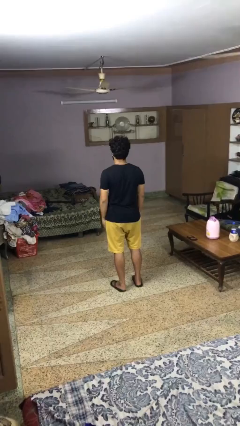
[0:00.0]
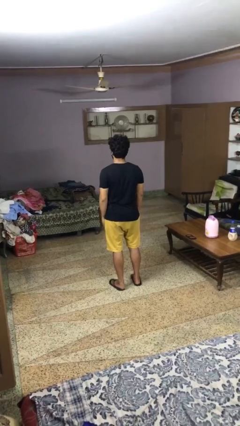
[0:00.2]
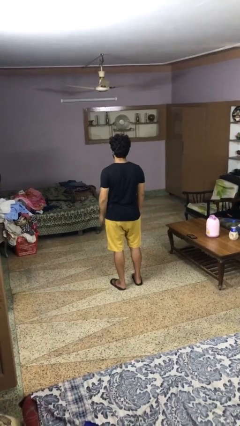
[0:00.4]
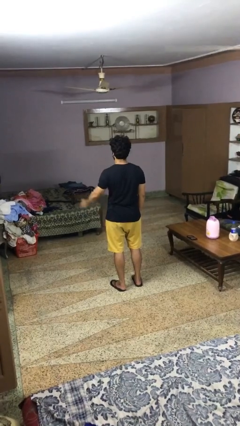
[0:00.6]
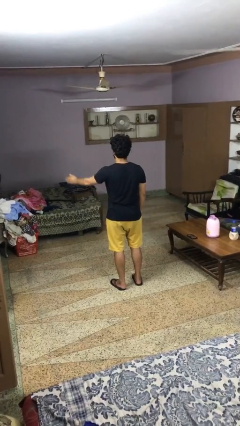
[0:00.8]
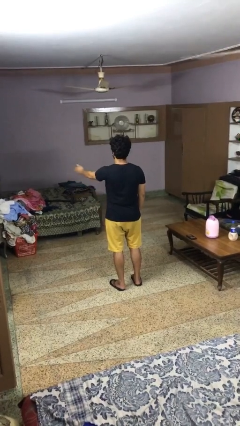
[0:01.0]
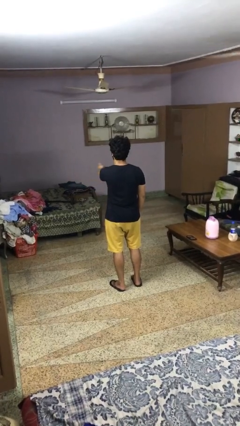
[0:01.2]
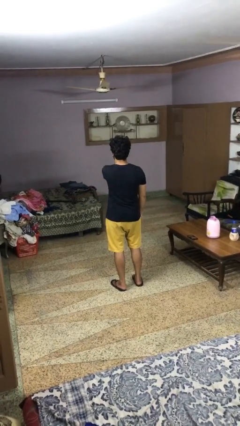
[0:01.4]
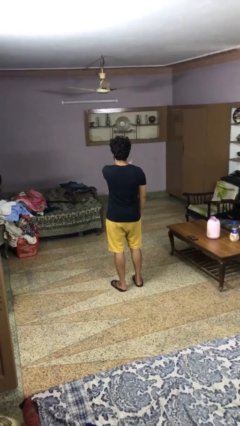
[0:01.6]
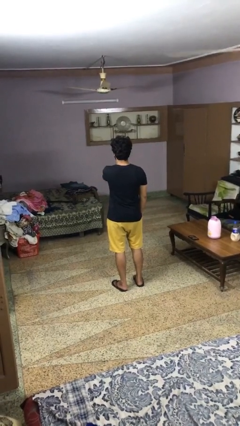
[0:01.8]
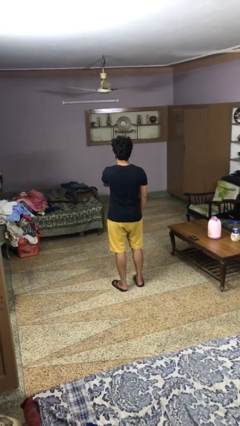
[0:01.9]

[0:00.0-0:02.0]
person gestures swipe right

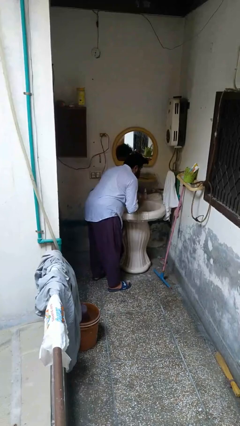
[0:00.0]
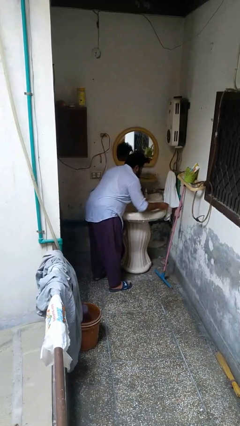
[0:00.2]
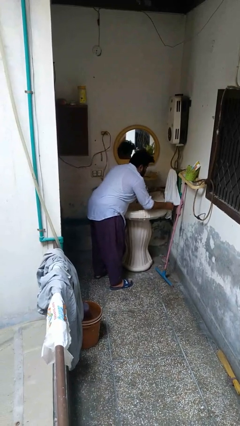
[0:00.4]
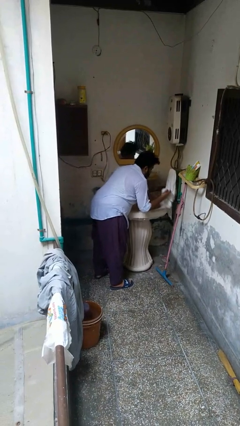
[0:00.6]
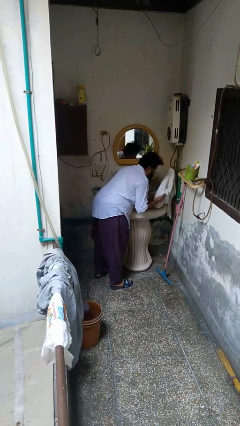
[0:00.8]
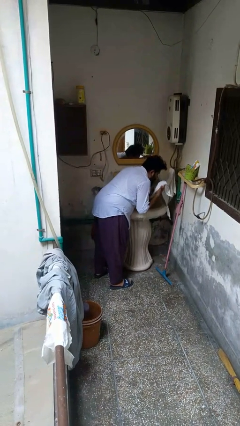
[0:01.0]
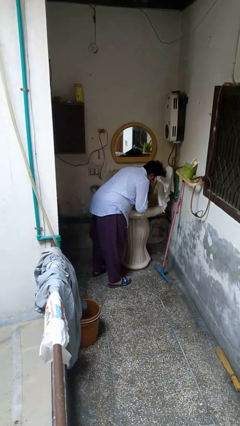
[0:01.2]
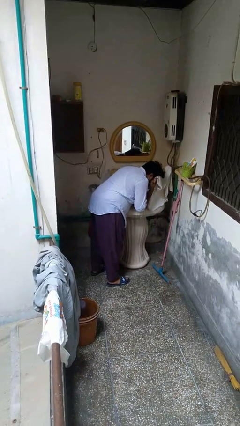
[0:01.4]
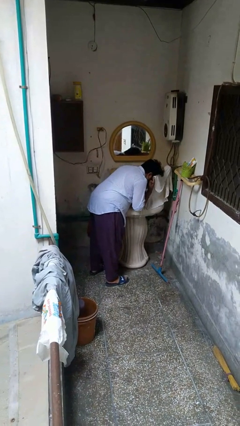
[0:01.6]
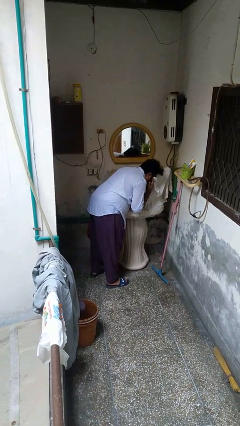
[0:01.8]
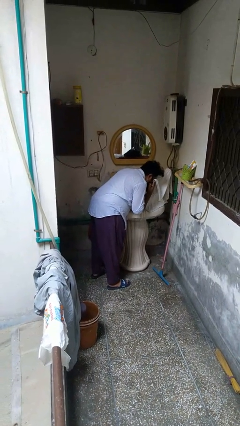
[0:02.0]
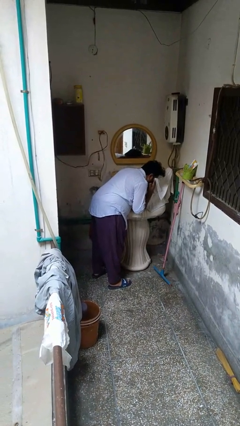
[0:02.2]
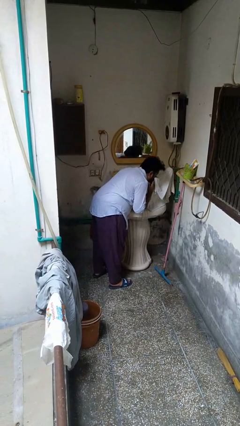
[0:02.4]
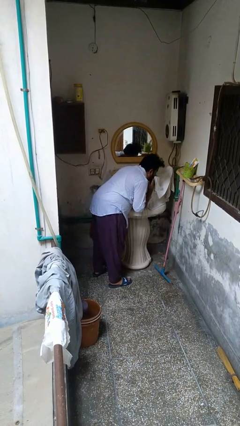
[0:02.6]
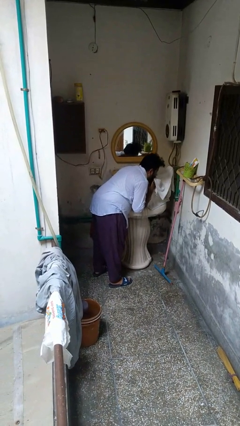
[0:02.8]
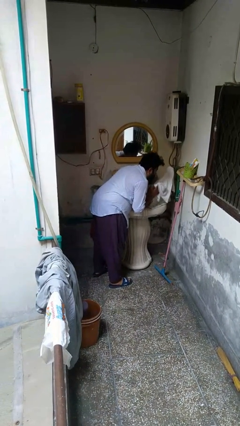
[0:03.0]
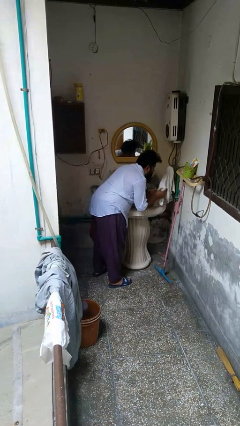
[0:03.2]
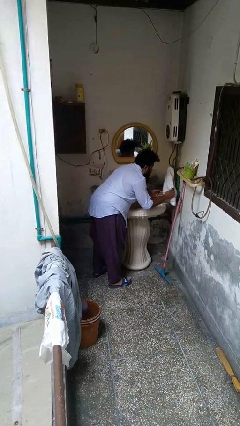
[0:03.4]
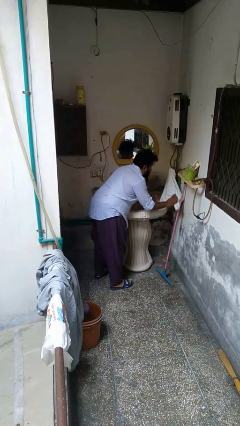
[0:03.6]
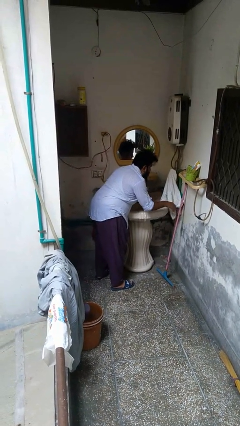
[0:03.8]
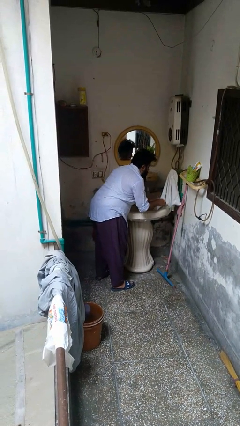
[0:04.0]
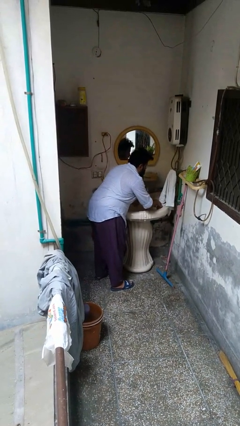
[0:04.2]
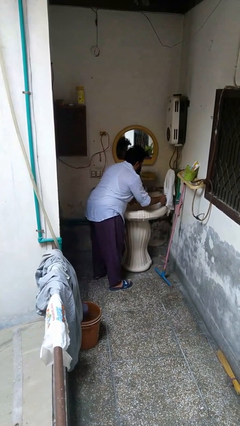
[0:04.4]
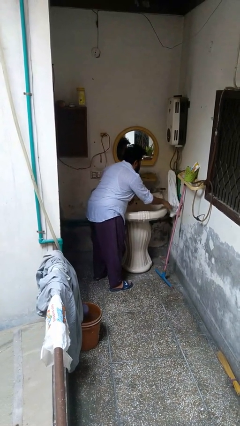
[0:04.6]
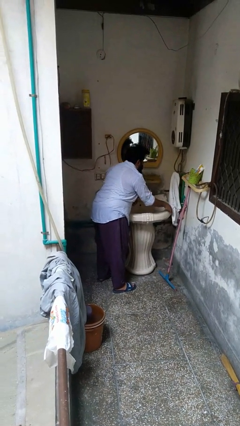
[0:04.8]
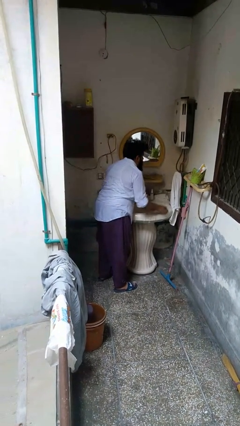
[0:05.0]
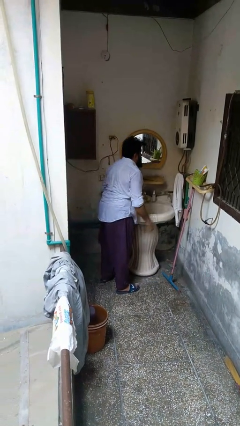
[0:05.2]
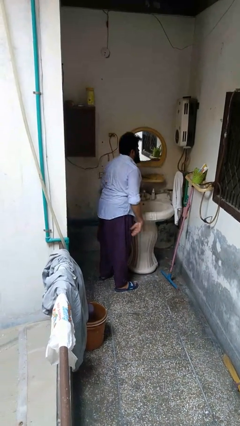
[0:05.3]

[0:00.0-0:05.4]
person dries face with towel

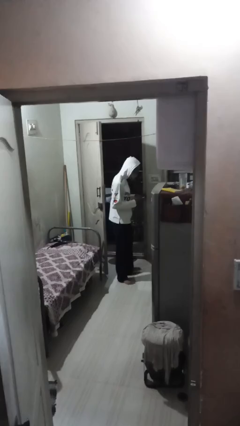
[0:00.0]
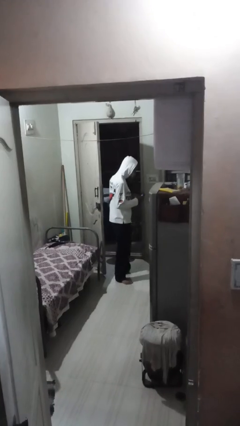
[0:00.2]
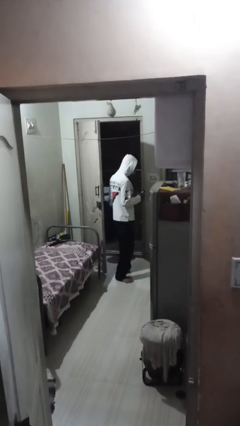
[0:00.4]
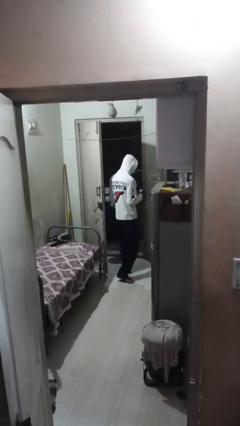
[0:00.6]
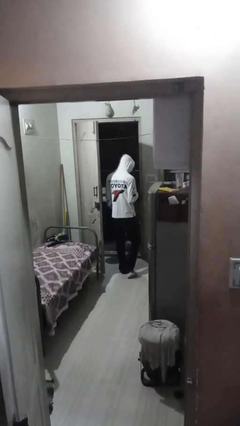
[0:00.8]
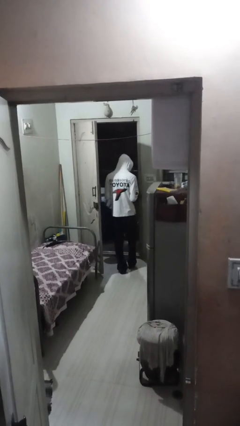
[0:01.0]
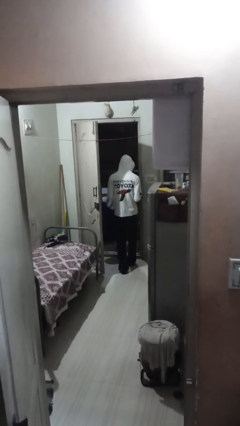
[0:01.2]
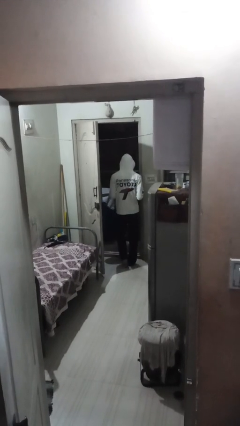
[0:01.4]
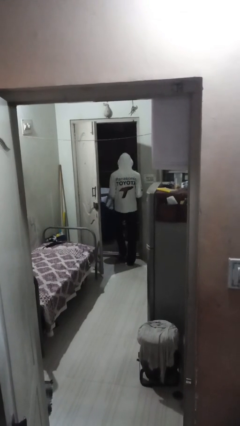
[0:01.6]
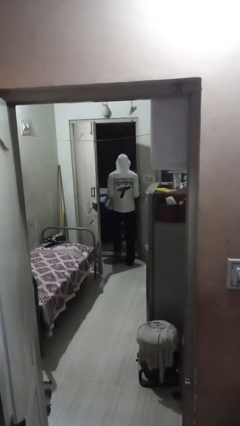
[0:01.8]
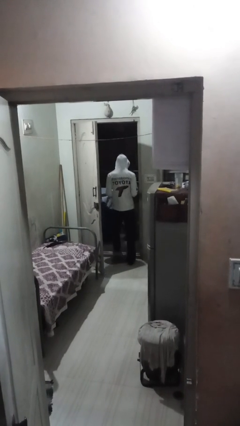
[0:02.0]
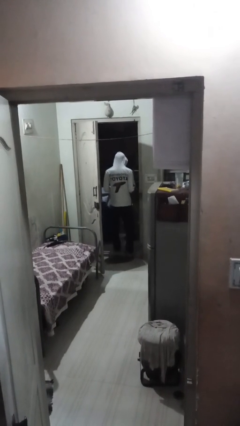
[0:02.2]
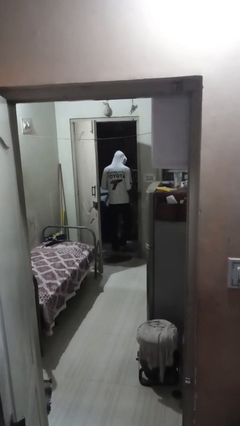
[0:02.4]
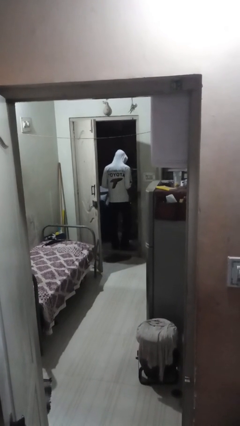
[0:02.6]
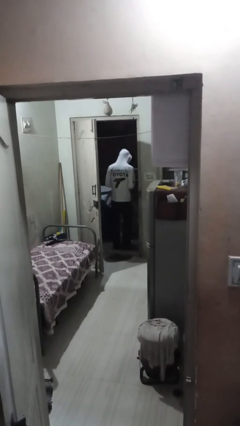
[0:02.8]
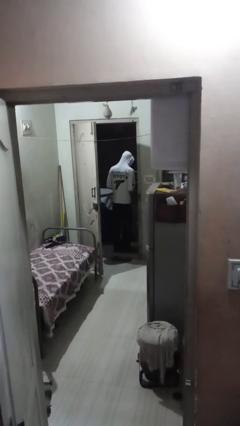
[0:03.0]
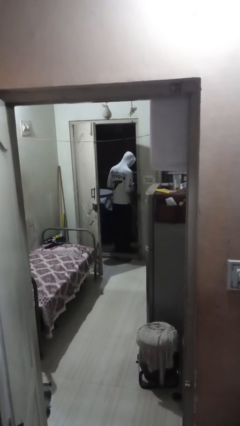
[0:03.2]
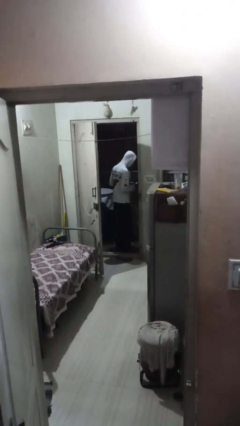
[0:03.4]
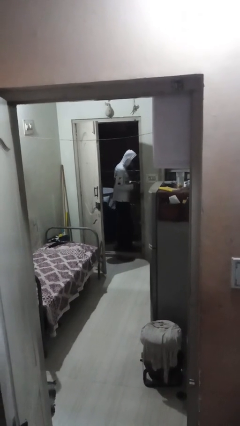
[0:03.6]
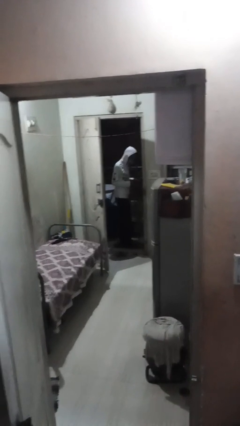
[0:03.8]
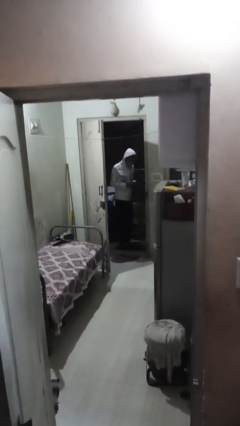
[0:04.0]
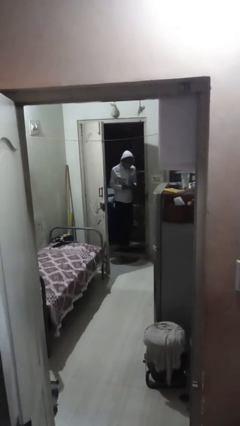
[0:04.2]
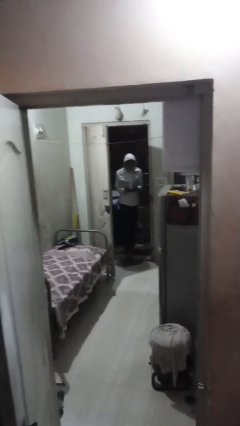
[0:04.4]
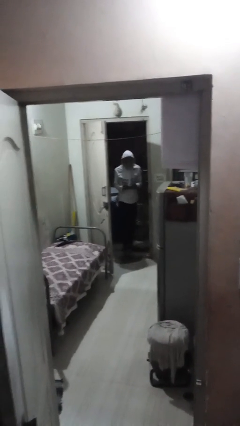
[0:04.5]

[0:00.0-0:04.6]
person exits scene through structure

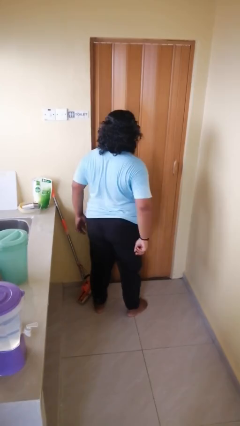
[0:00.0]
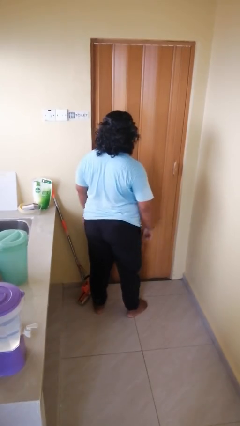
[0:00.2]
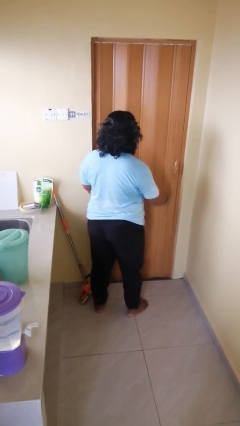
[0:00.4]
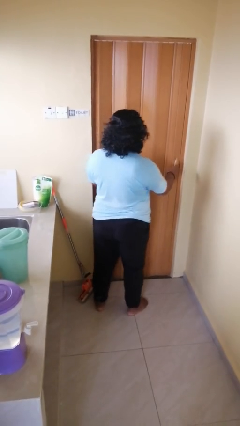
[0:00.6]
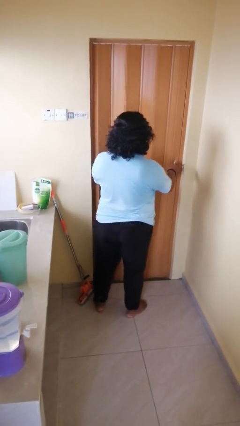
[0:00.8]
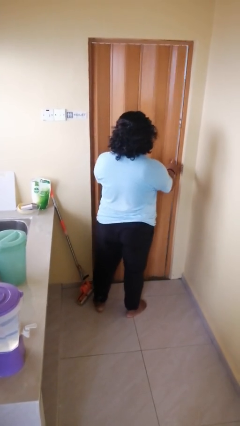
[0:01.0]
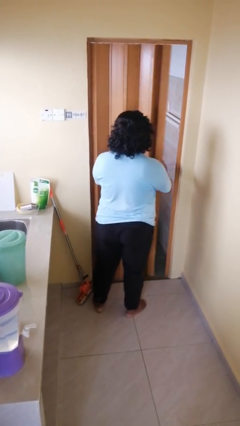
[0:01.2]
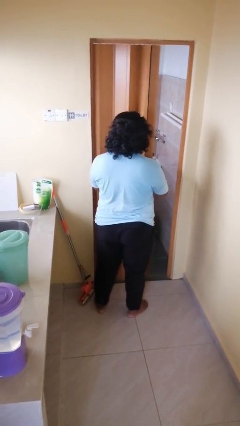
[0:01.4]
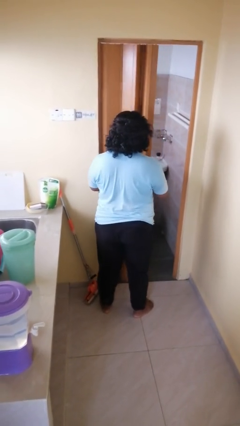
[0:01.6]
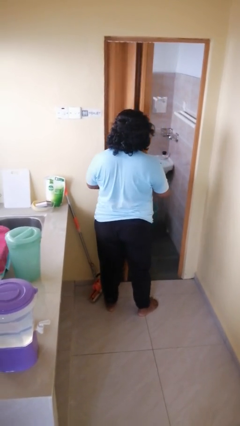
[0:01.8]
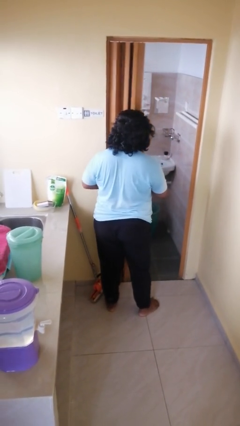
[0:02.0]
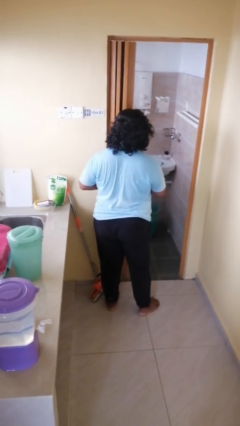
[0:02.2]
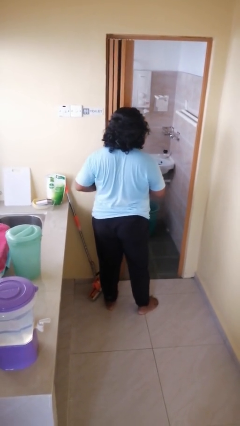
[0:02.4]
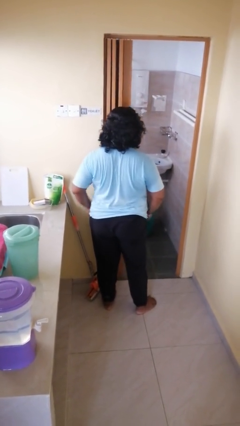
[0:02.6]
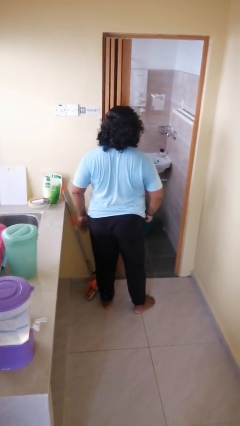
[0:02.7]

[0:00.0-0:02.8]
person opens sliding door

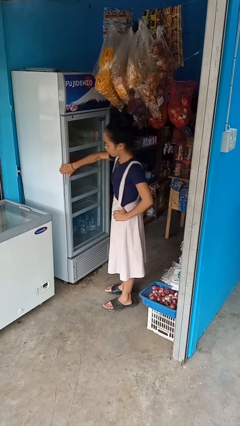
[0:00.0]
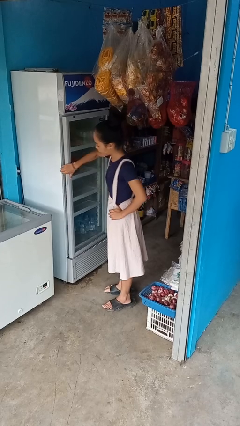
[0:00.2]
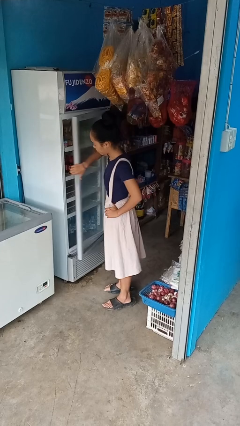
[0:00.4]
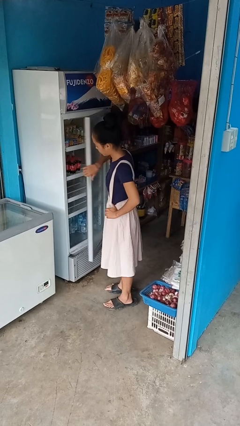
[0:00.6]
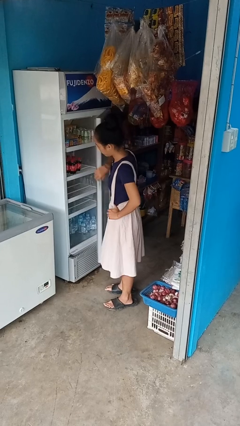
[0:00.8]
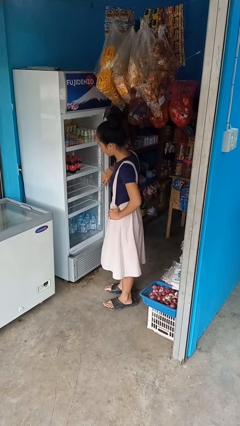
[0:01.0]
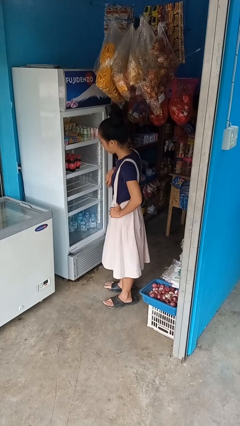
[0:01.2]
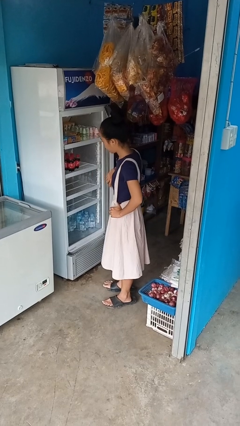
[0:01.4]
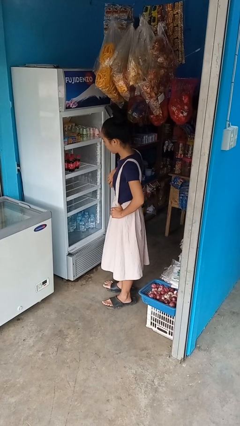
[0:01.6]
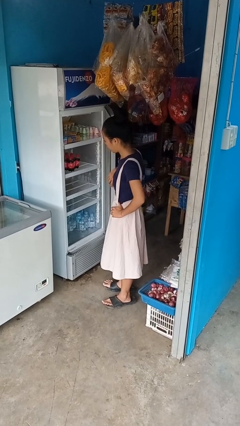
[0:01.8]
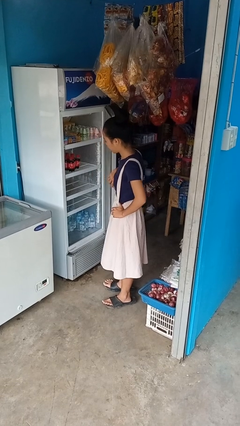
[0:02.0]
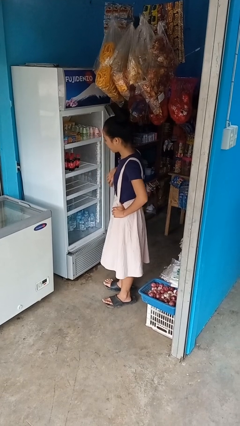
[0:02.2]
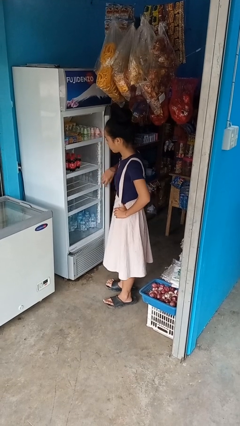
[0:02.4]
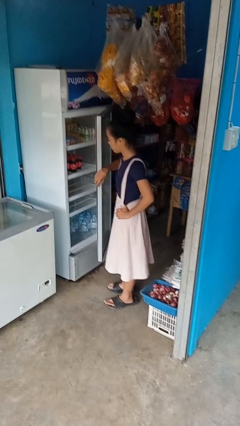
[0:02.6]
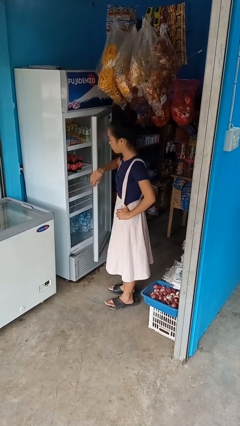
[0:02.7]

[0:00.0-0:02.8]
person opens refrigerator
